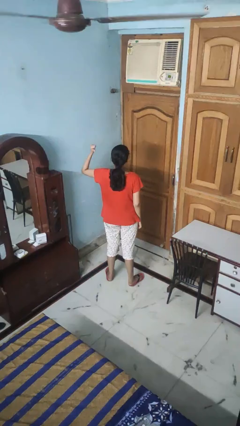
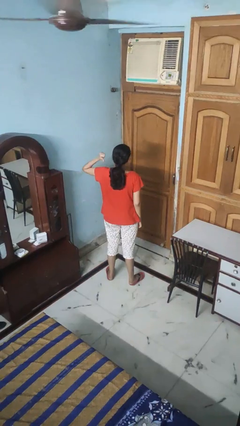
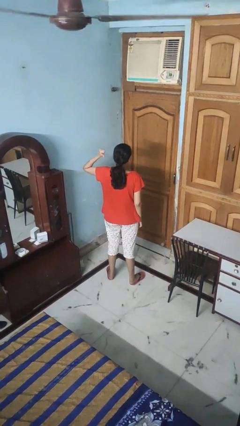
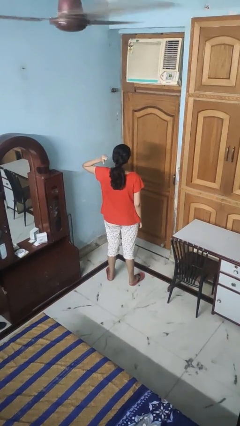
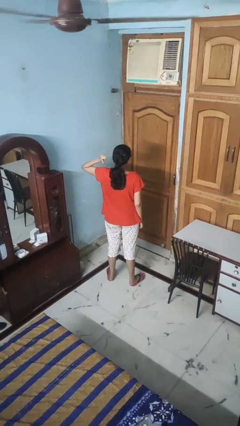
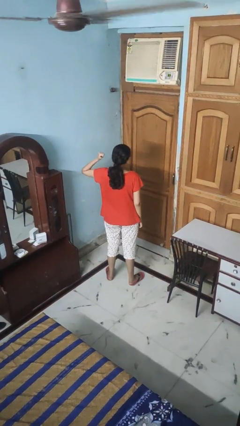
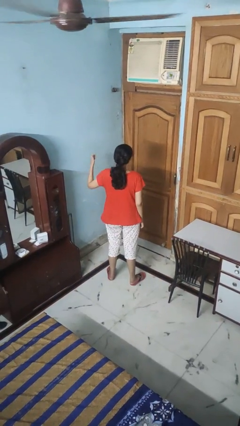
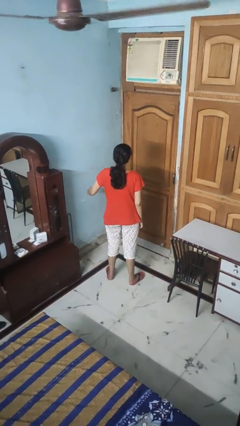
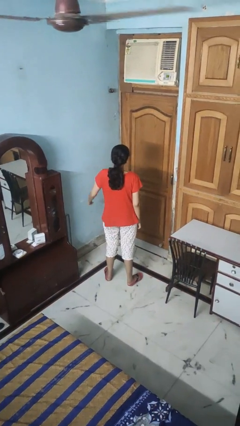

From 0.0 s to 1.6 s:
person gestures behind me

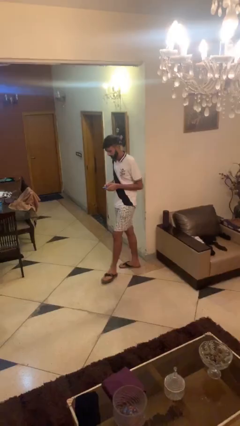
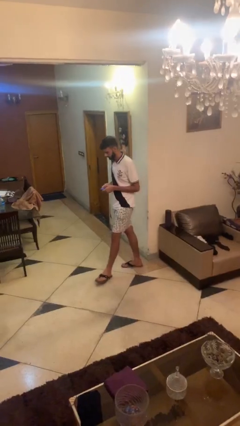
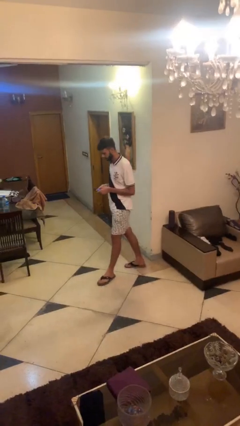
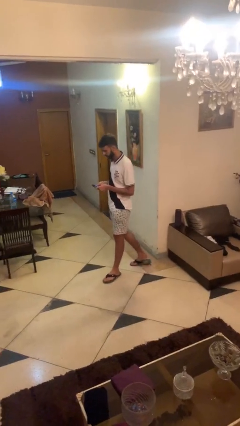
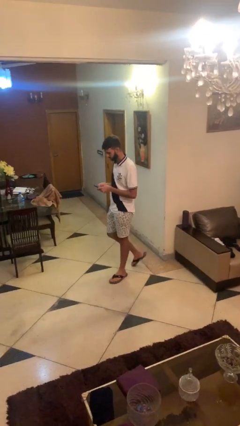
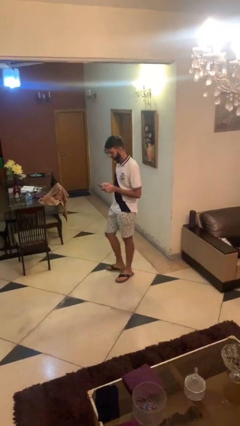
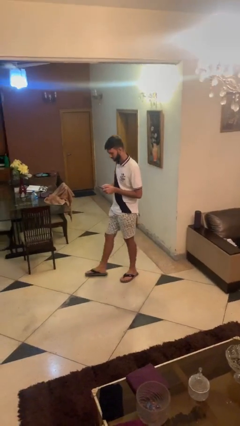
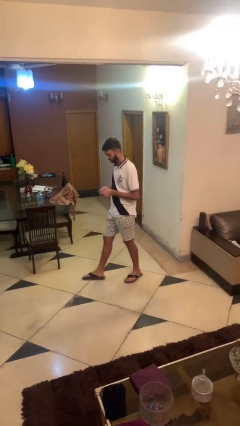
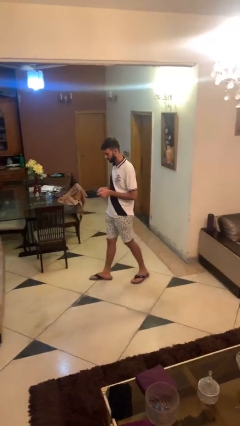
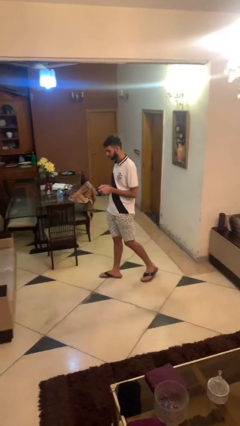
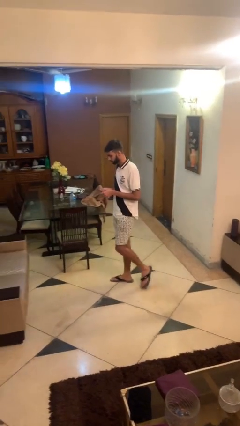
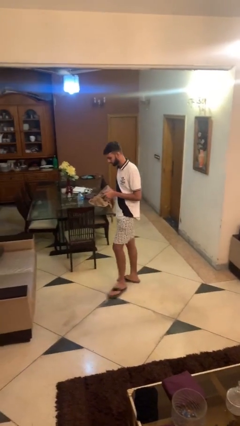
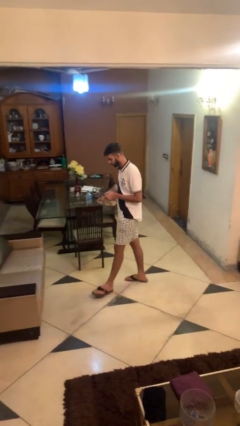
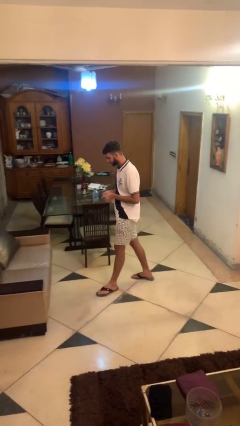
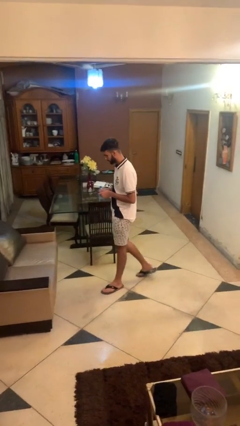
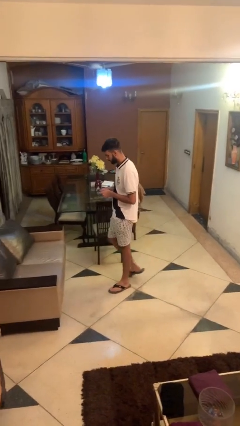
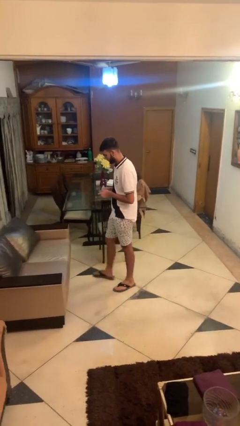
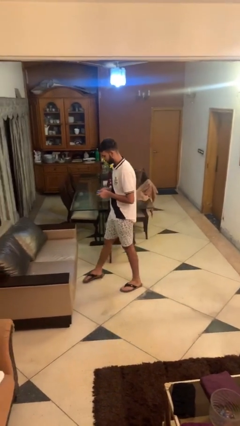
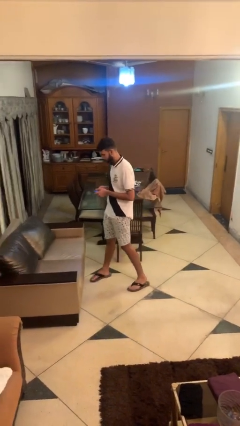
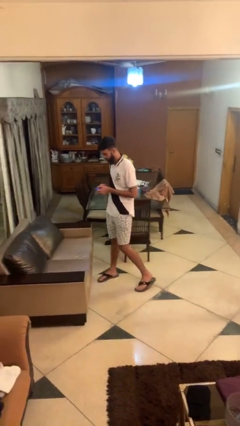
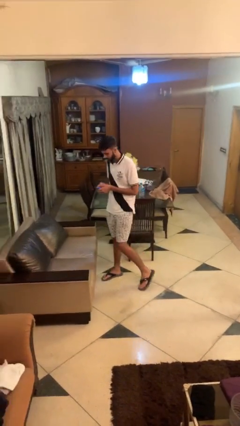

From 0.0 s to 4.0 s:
person texts on phone

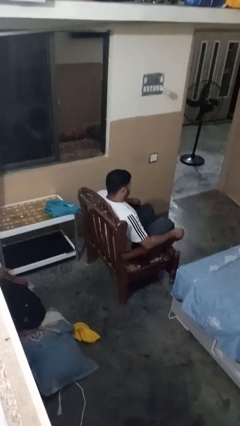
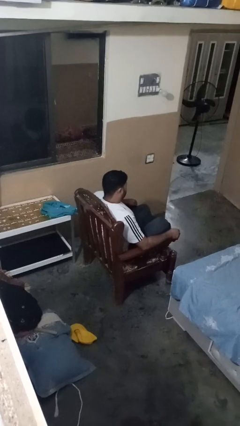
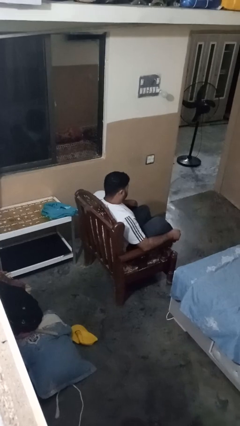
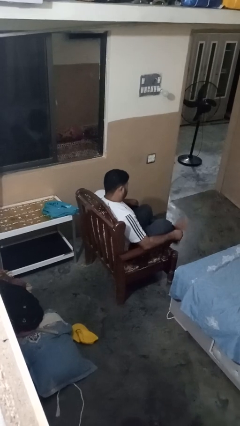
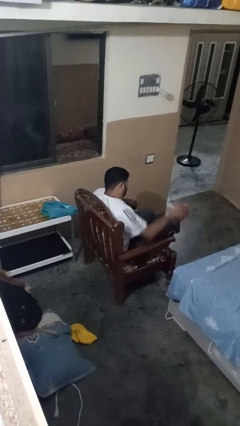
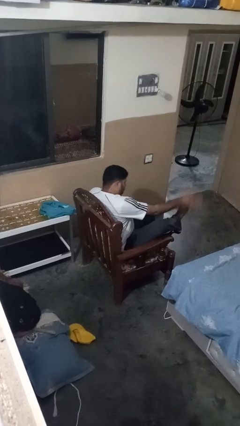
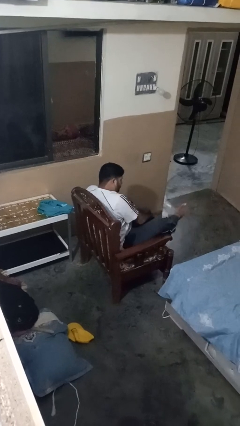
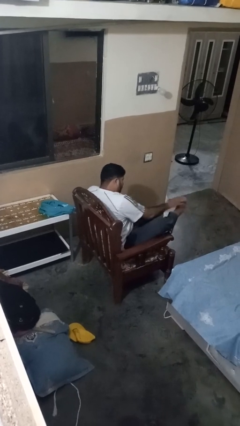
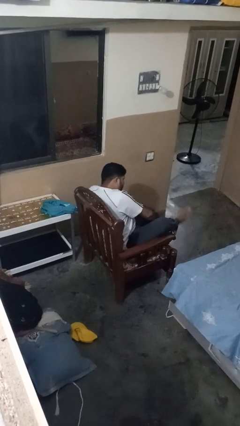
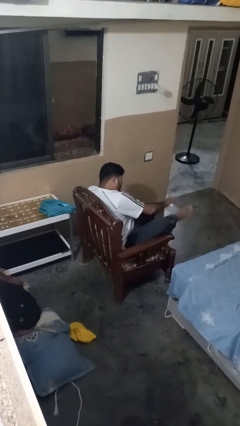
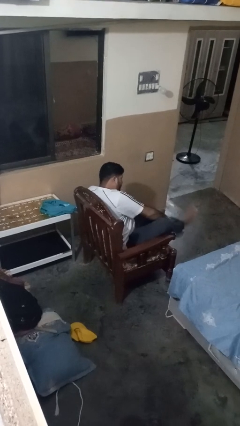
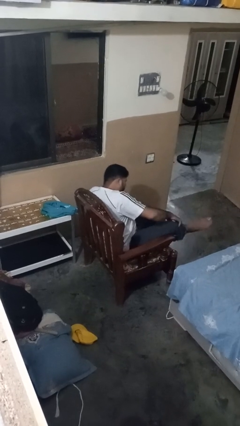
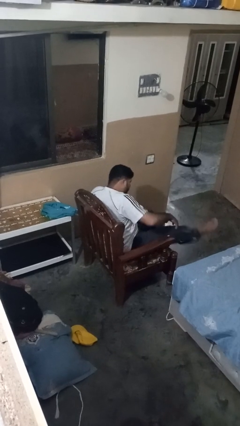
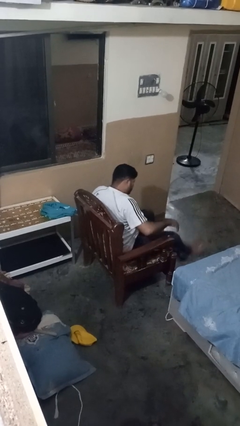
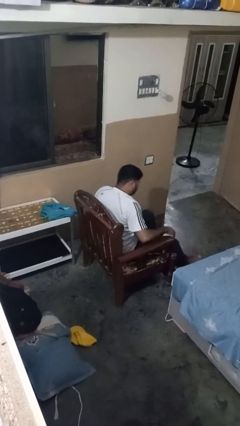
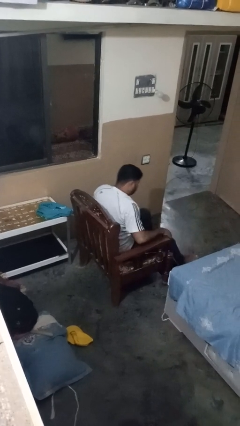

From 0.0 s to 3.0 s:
person swats bug

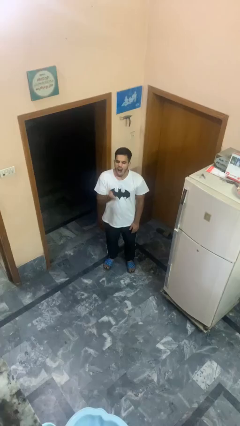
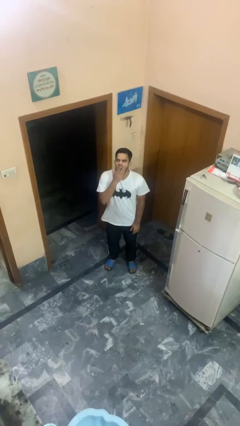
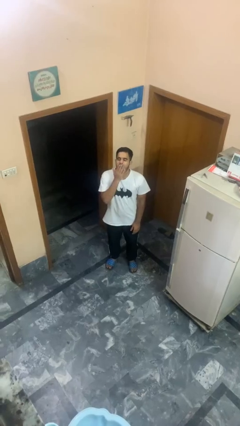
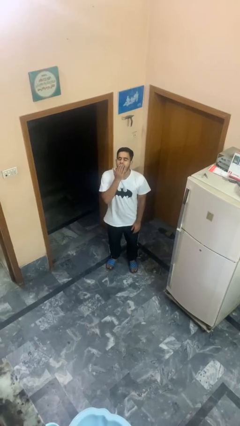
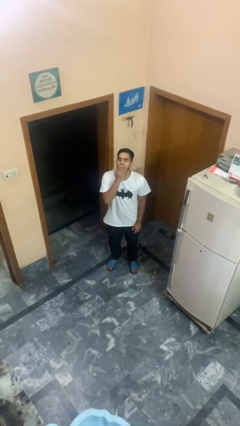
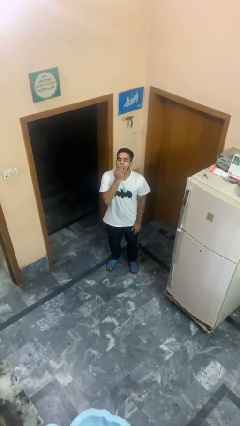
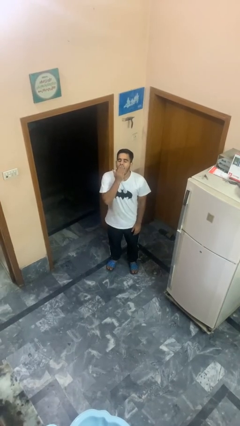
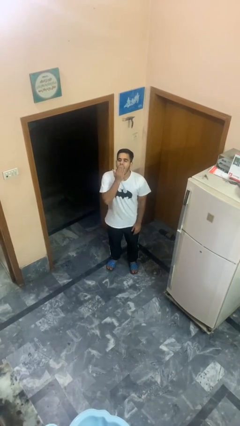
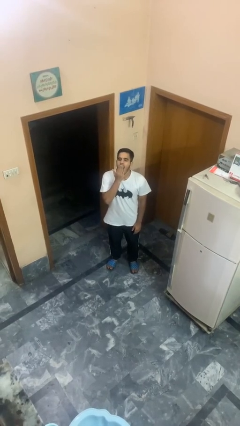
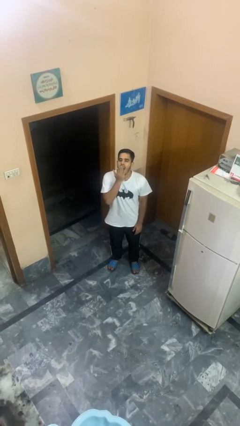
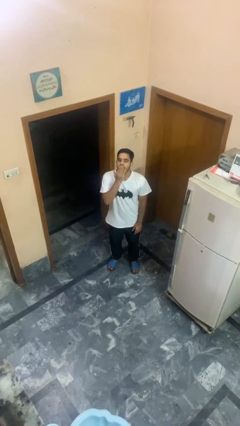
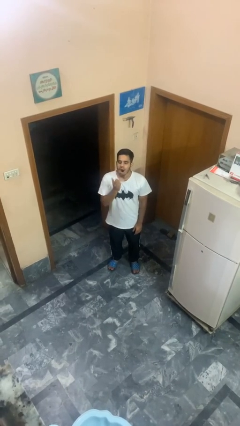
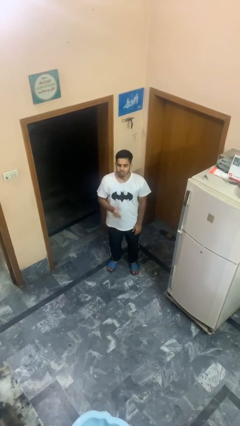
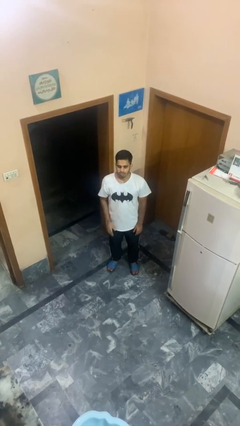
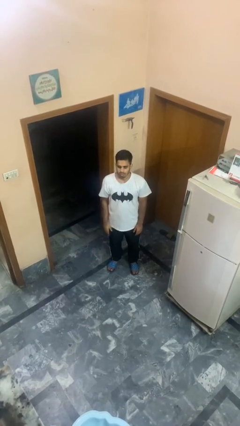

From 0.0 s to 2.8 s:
person yawns

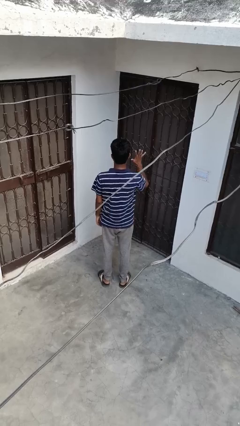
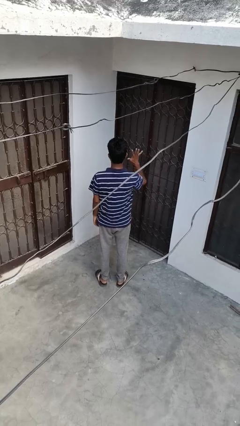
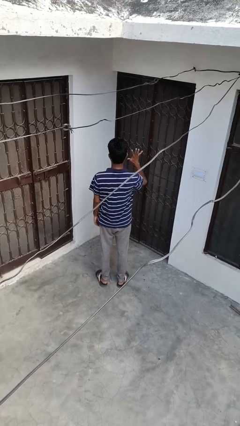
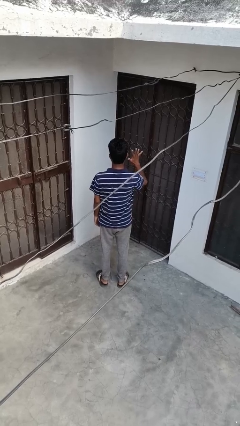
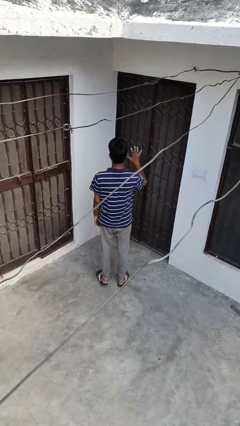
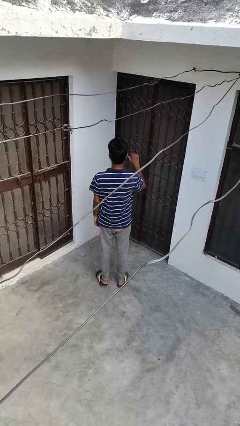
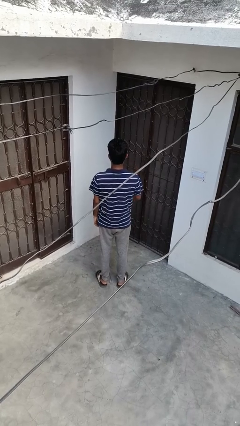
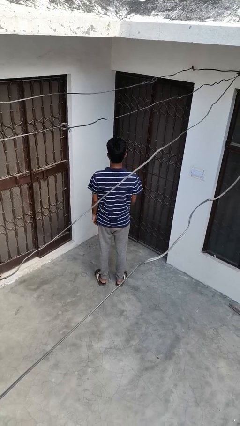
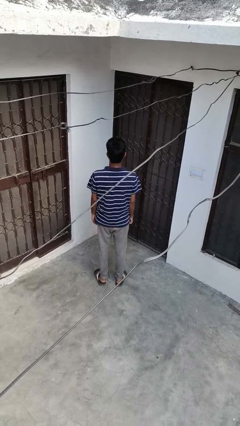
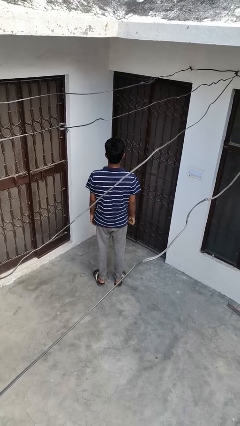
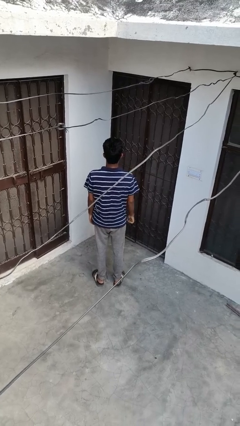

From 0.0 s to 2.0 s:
person gestures number five

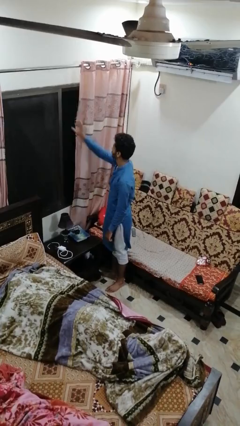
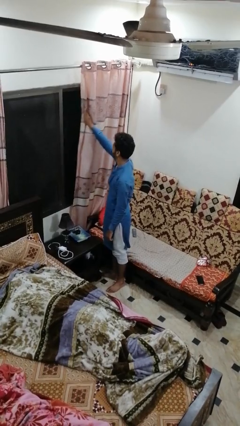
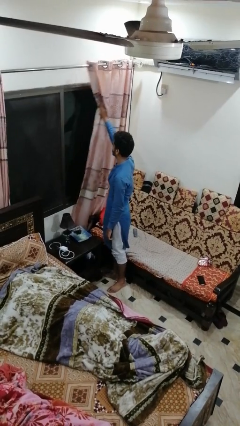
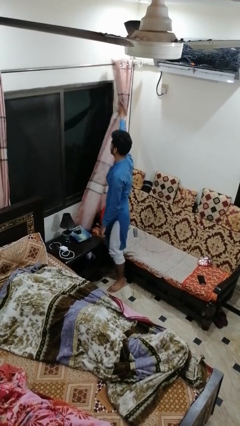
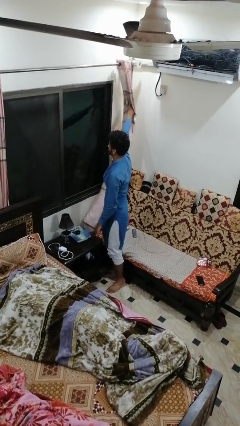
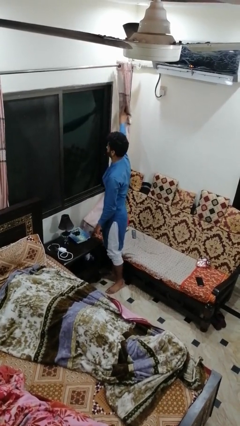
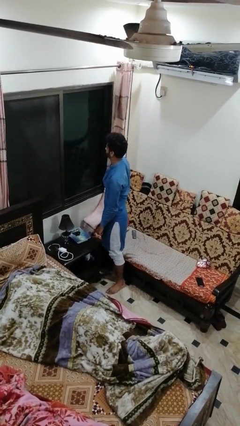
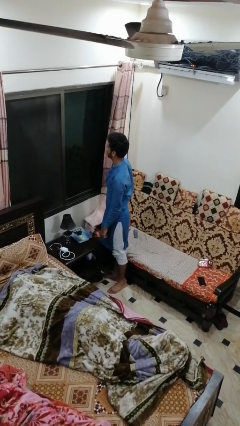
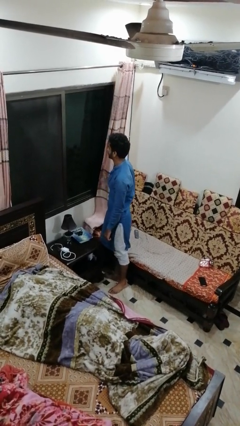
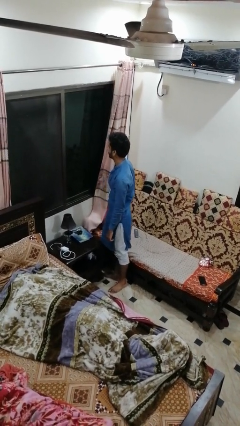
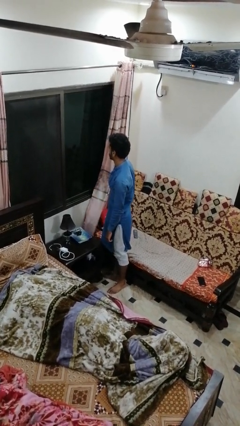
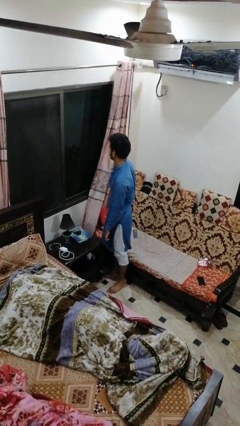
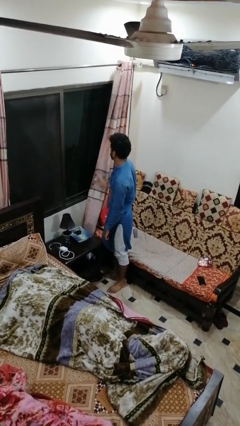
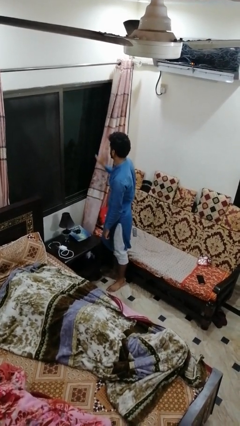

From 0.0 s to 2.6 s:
person opens curtains

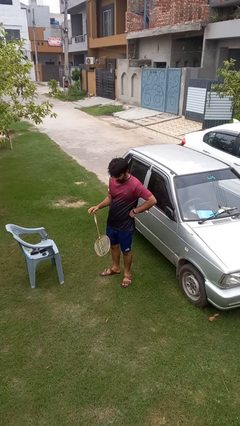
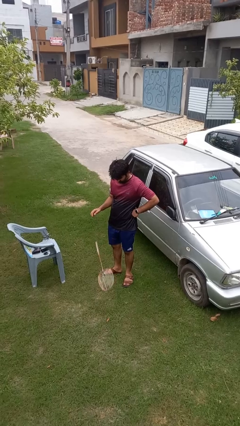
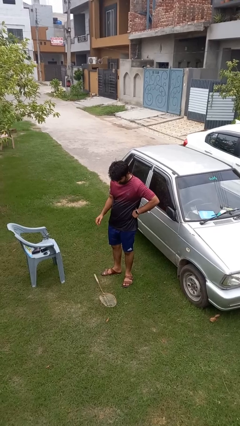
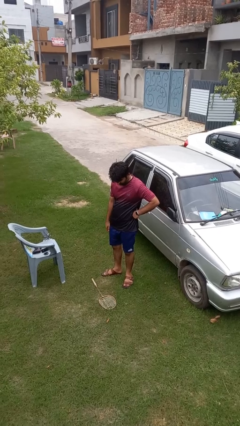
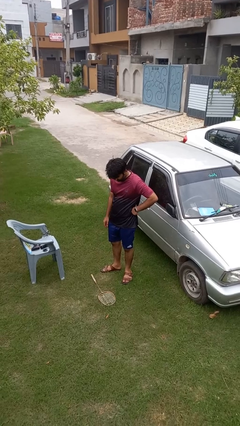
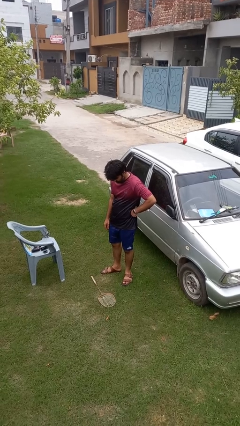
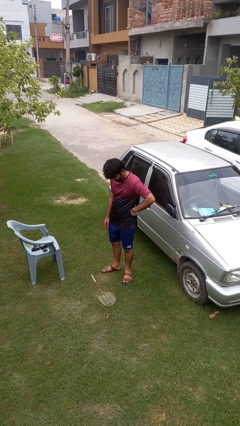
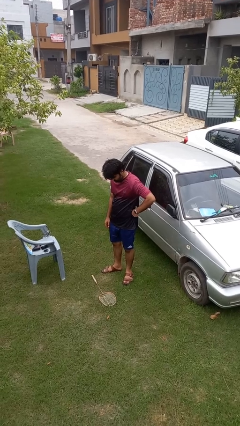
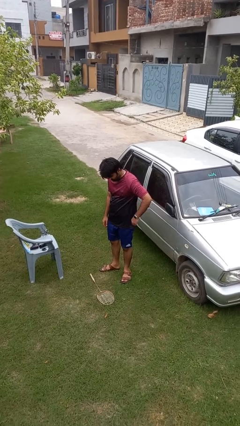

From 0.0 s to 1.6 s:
person drops object
